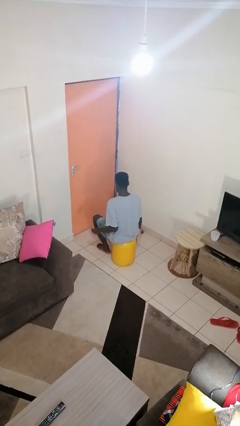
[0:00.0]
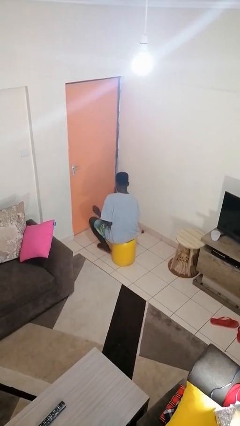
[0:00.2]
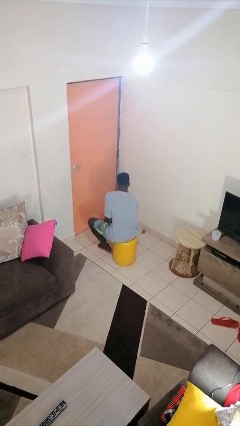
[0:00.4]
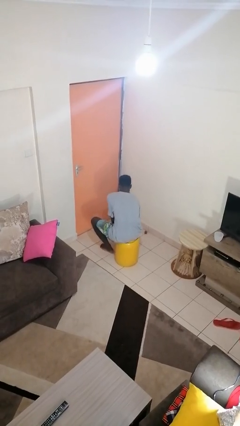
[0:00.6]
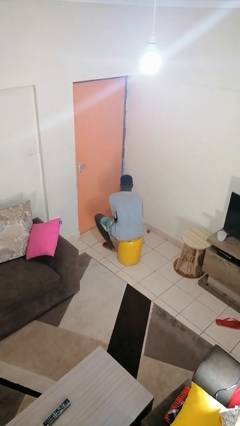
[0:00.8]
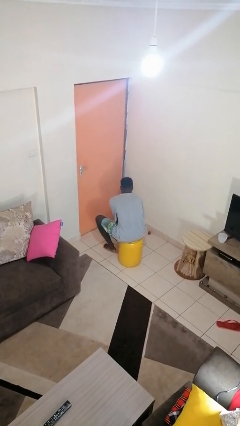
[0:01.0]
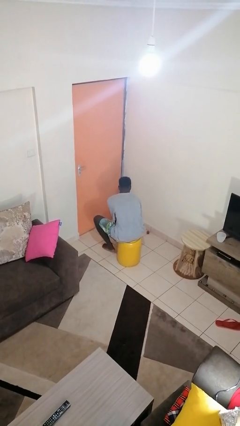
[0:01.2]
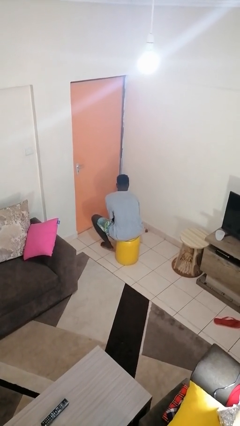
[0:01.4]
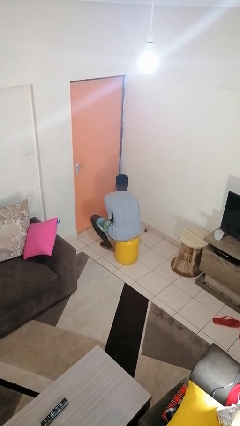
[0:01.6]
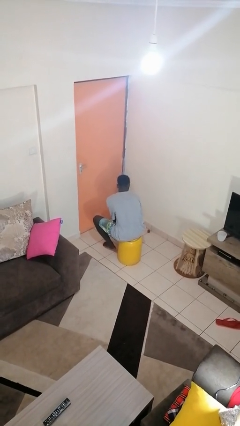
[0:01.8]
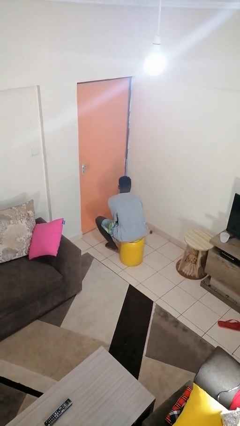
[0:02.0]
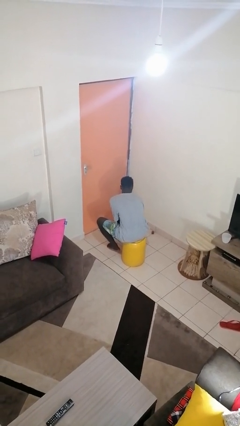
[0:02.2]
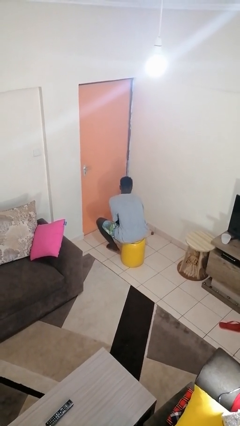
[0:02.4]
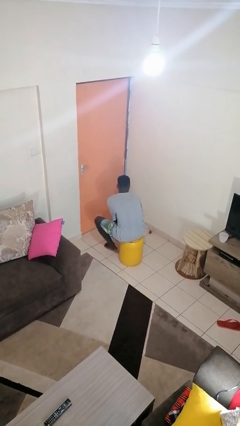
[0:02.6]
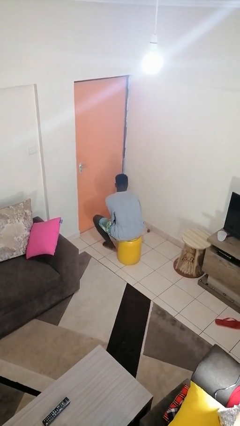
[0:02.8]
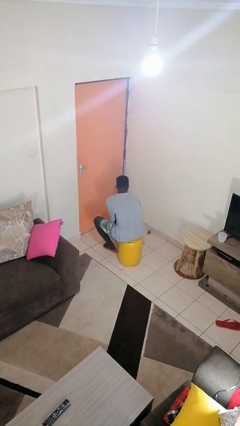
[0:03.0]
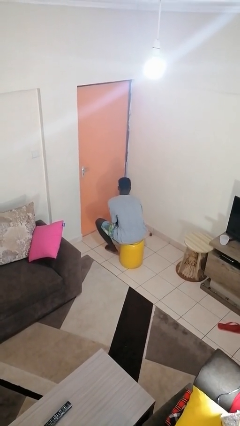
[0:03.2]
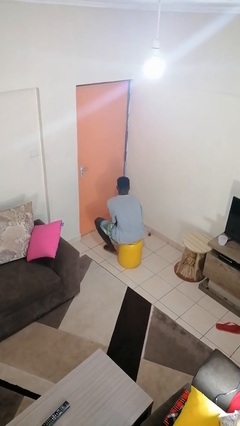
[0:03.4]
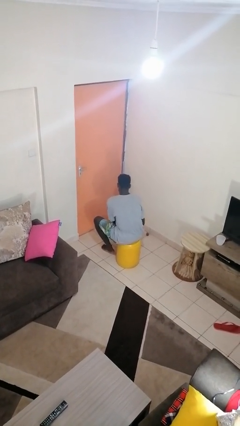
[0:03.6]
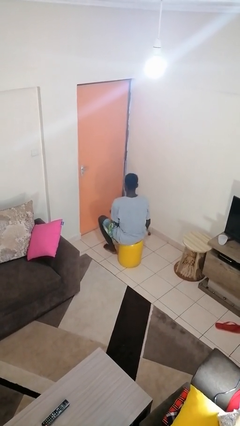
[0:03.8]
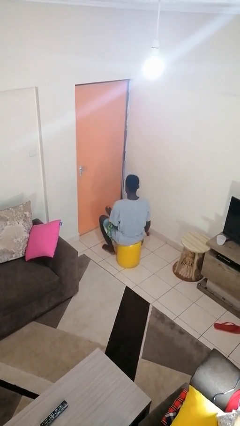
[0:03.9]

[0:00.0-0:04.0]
person rubs foot

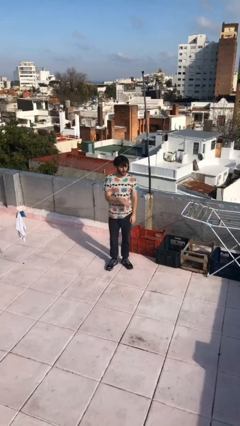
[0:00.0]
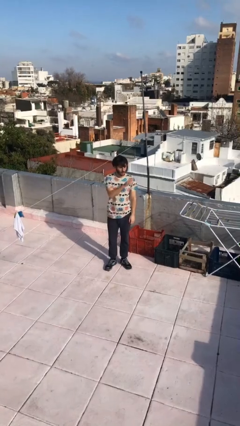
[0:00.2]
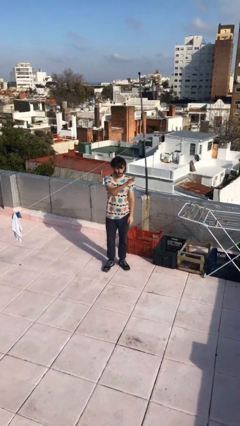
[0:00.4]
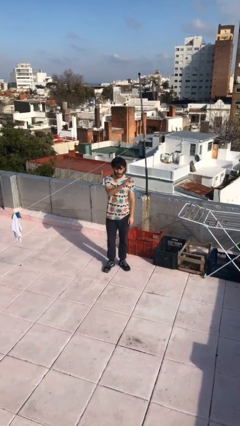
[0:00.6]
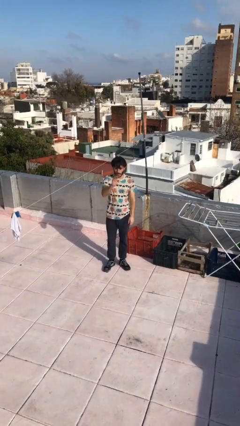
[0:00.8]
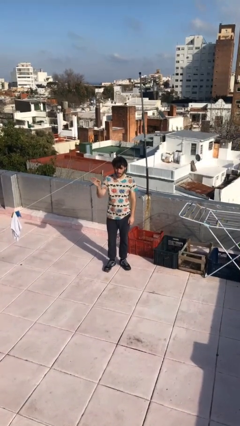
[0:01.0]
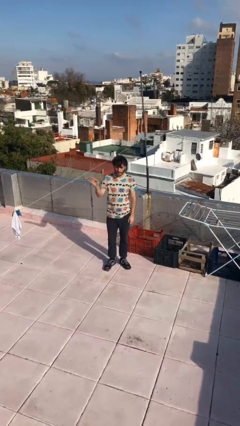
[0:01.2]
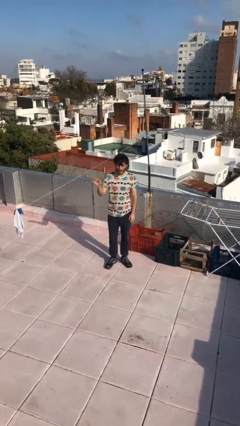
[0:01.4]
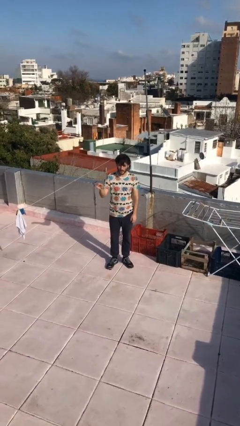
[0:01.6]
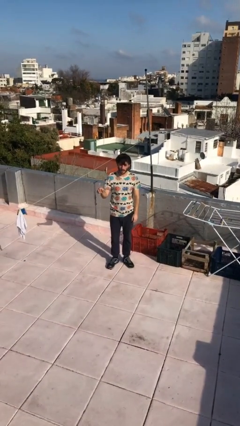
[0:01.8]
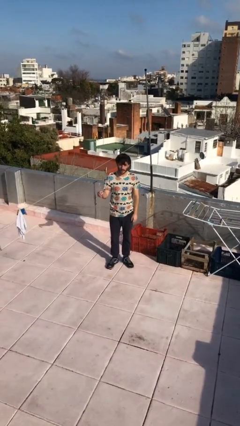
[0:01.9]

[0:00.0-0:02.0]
person gestures swipe right

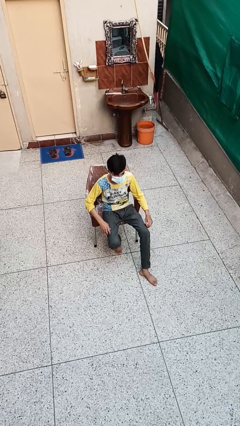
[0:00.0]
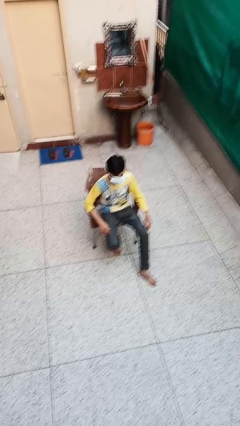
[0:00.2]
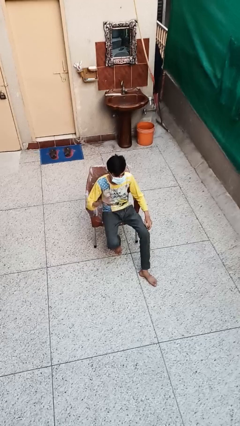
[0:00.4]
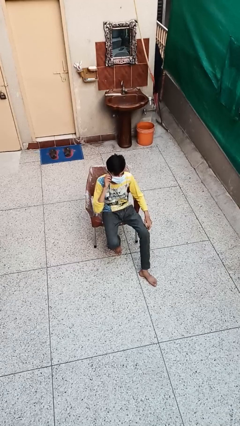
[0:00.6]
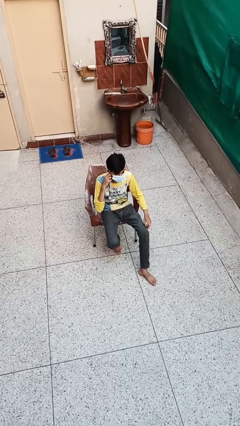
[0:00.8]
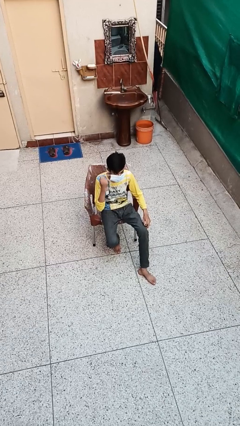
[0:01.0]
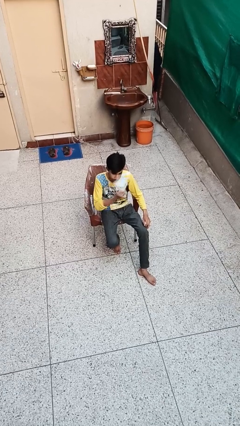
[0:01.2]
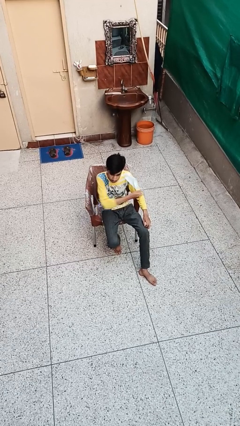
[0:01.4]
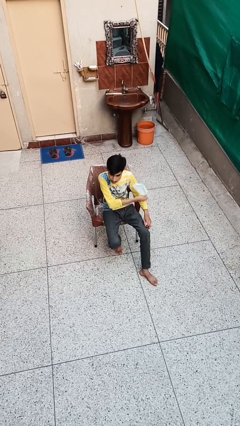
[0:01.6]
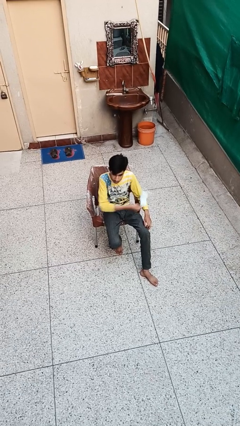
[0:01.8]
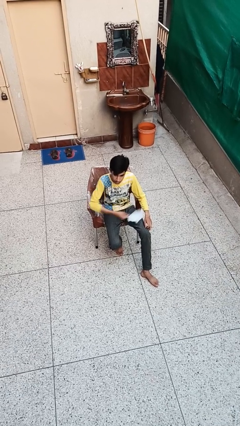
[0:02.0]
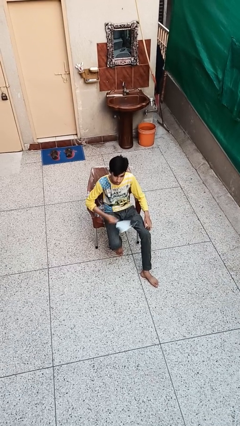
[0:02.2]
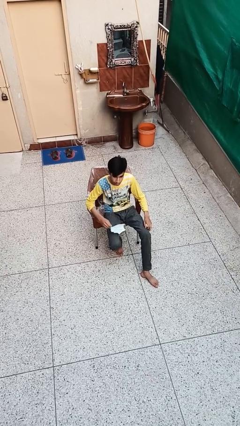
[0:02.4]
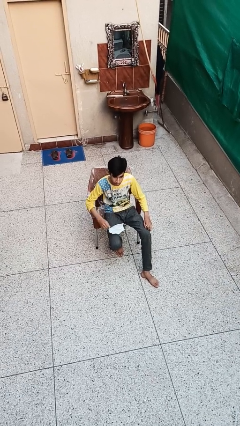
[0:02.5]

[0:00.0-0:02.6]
person takes off facemask

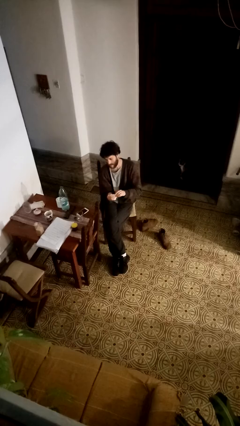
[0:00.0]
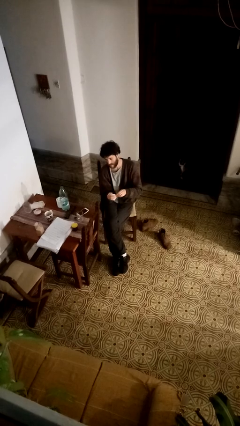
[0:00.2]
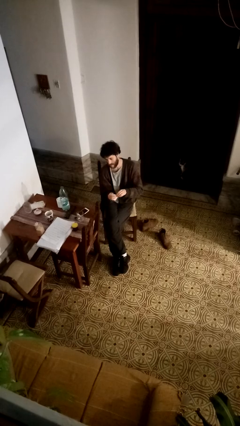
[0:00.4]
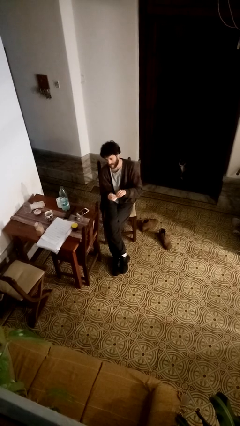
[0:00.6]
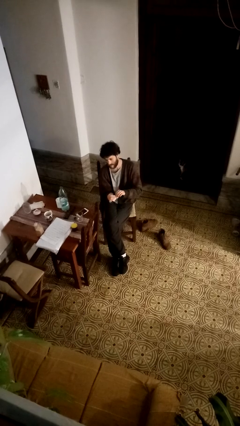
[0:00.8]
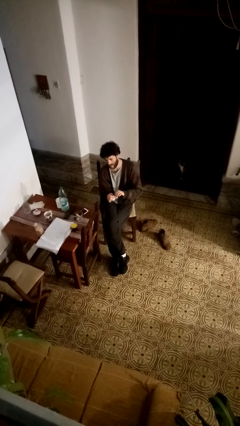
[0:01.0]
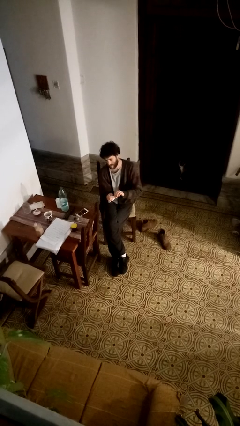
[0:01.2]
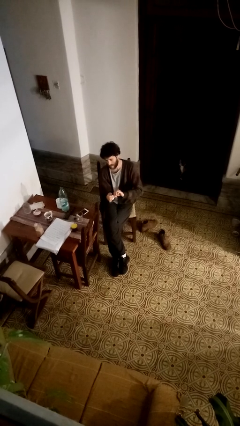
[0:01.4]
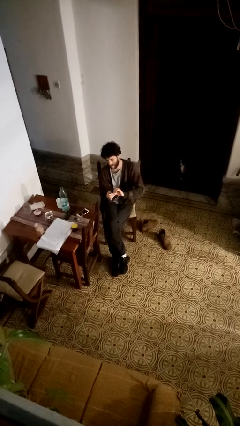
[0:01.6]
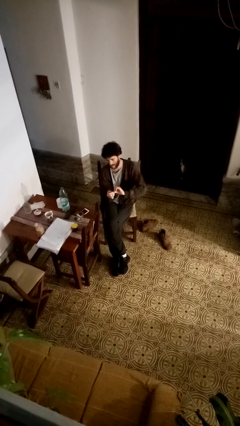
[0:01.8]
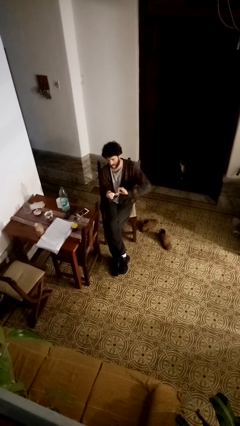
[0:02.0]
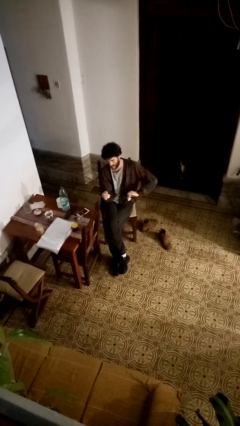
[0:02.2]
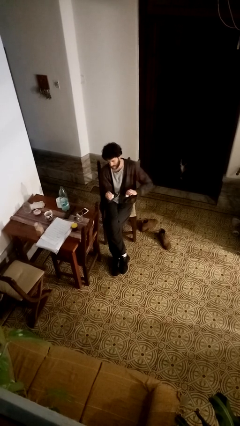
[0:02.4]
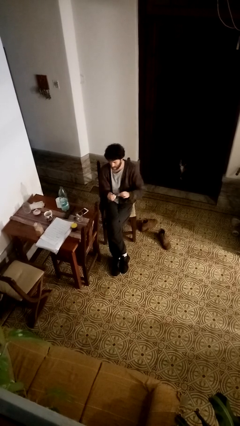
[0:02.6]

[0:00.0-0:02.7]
person tears paper

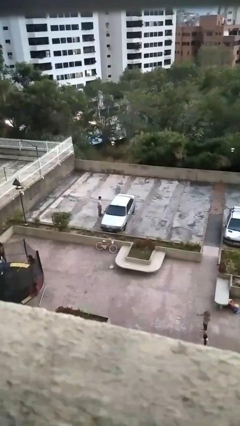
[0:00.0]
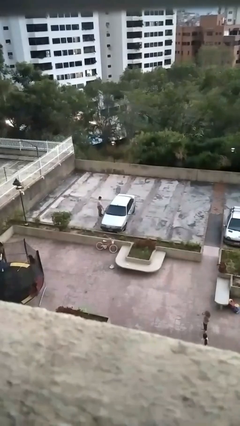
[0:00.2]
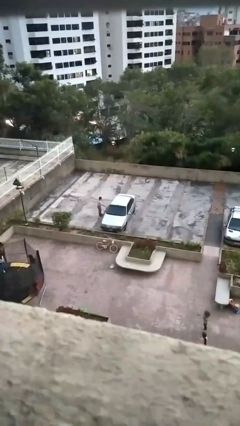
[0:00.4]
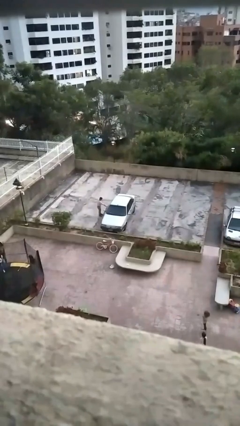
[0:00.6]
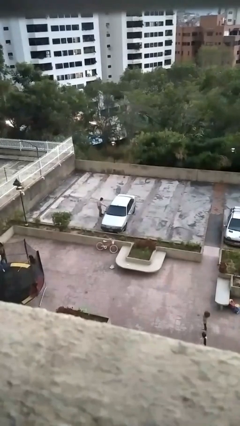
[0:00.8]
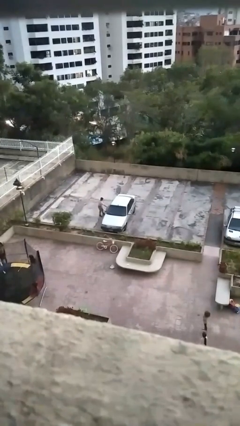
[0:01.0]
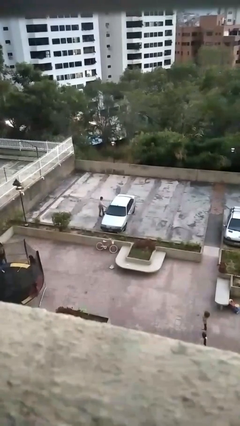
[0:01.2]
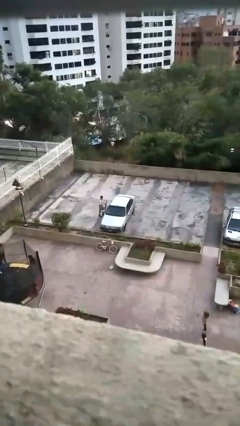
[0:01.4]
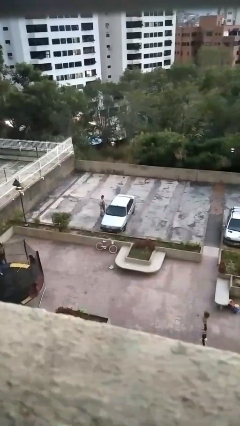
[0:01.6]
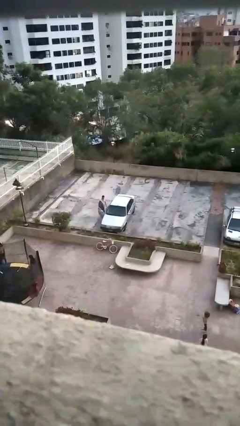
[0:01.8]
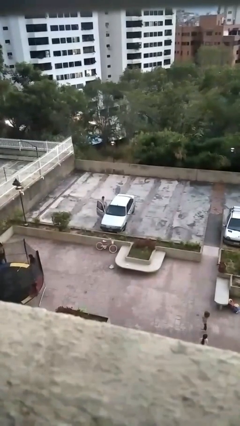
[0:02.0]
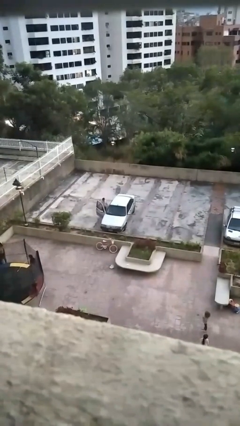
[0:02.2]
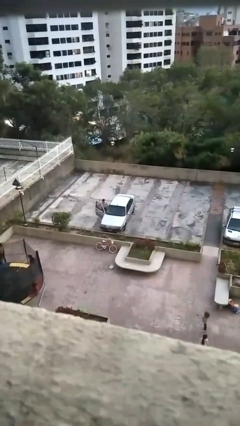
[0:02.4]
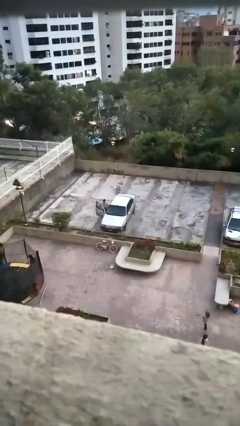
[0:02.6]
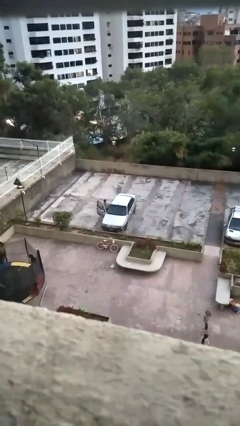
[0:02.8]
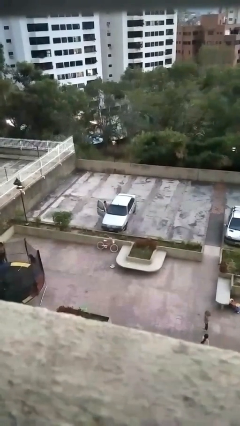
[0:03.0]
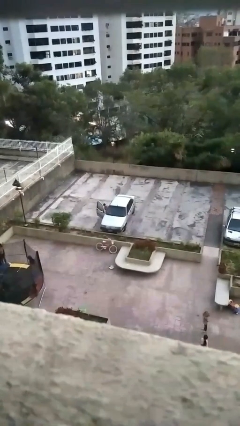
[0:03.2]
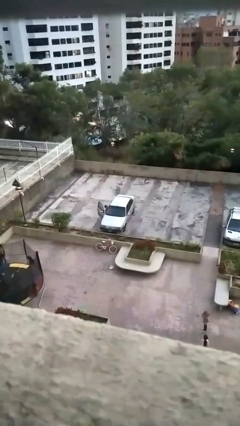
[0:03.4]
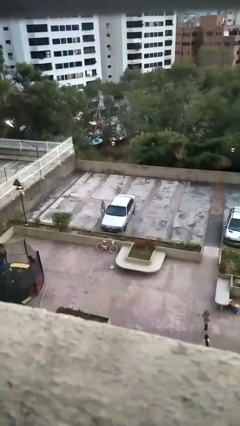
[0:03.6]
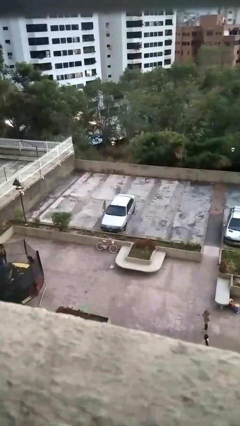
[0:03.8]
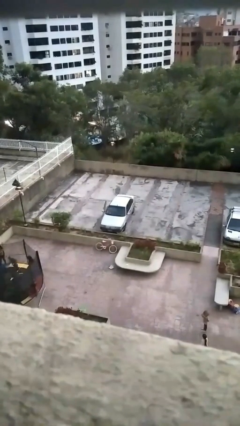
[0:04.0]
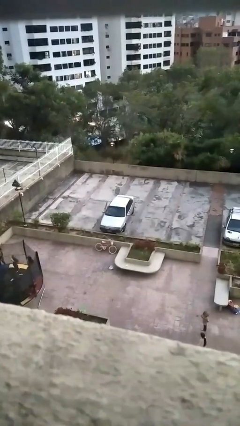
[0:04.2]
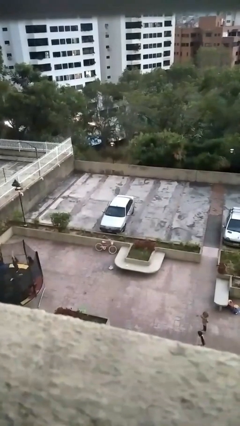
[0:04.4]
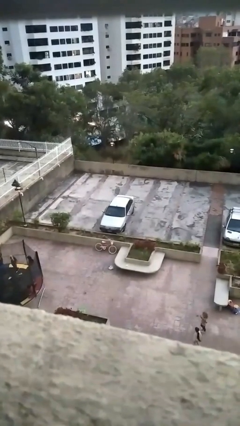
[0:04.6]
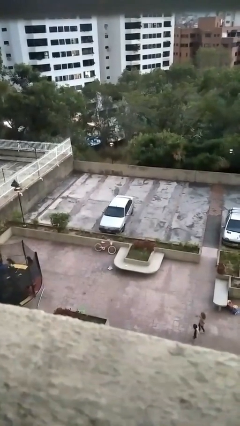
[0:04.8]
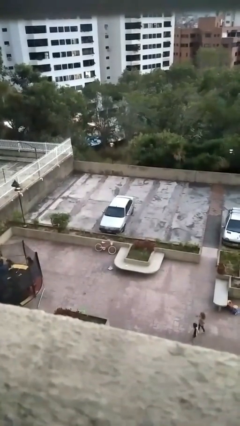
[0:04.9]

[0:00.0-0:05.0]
car picks up person

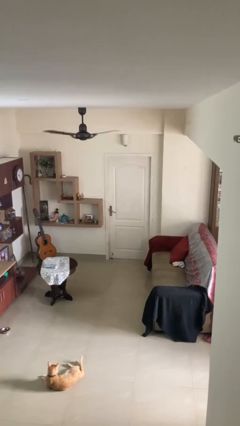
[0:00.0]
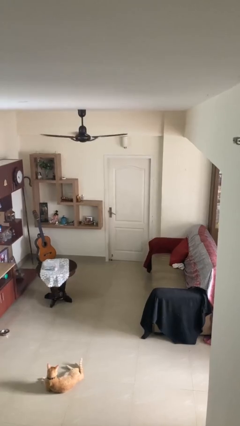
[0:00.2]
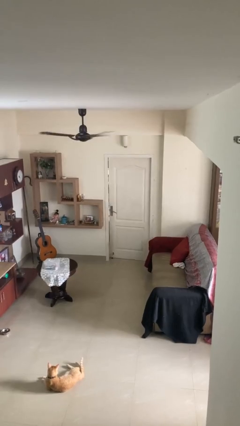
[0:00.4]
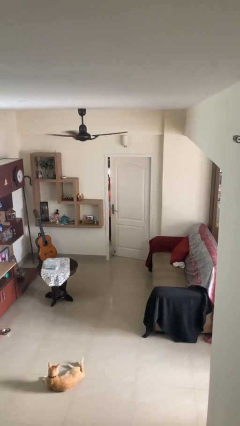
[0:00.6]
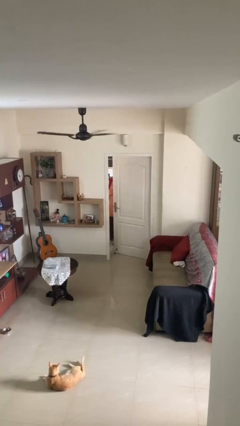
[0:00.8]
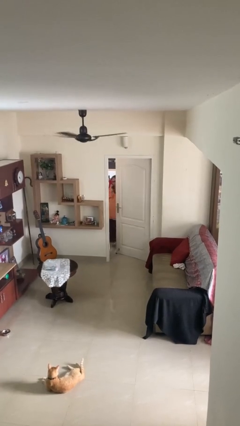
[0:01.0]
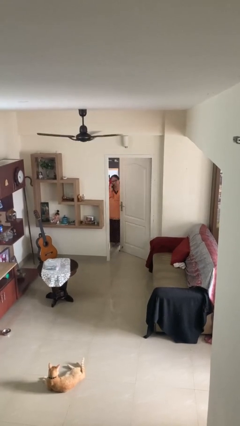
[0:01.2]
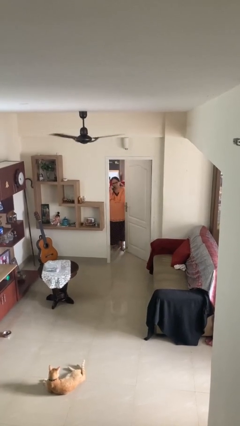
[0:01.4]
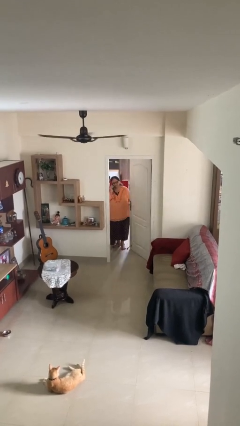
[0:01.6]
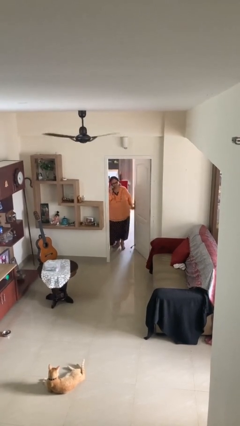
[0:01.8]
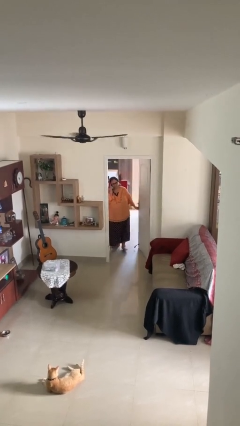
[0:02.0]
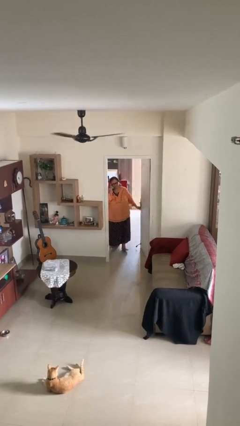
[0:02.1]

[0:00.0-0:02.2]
person opens facility door
